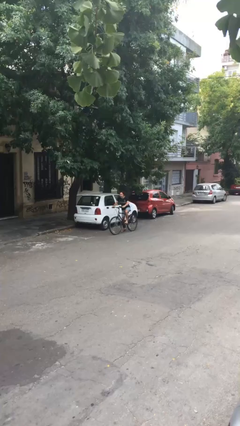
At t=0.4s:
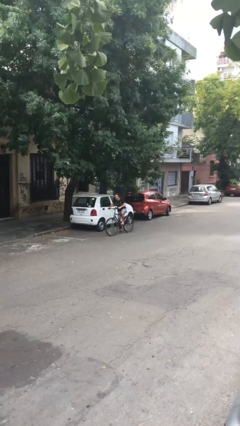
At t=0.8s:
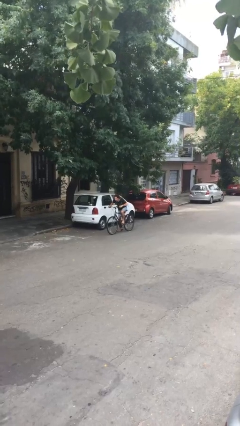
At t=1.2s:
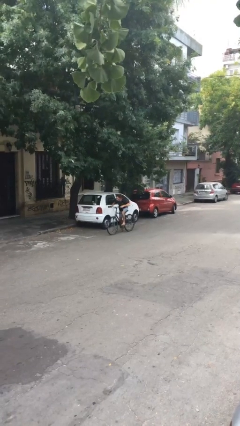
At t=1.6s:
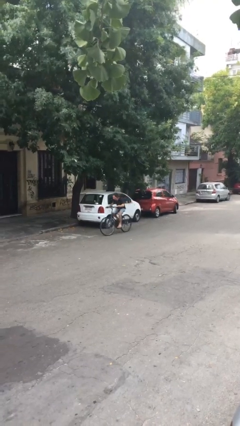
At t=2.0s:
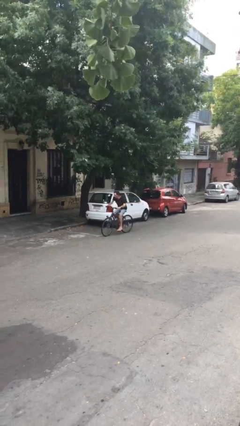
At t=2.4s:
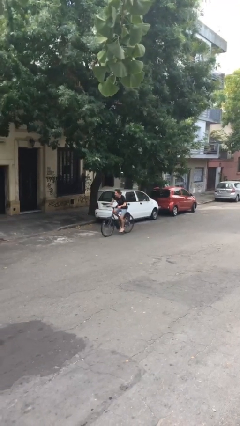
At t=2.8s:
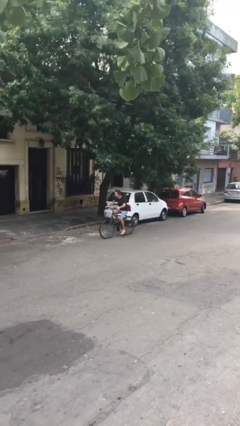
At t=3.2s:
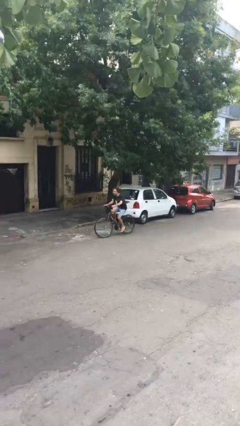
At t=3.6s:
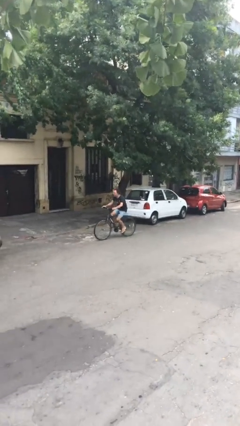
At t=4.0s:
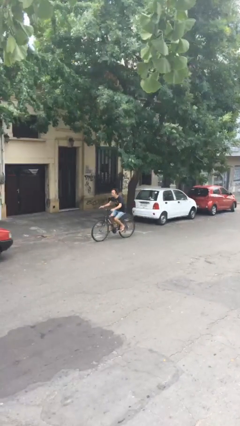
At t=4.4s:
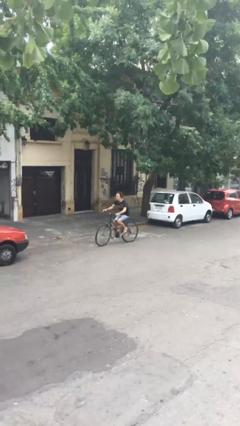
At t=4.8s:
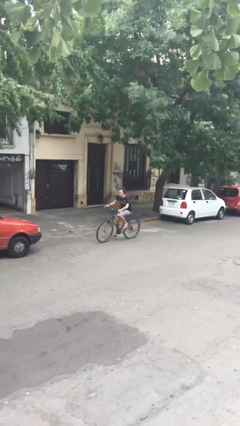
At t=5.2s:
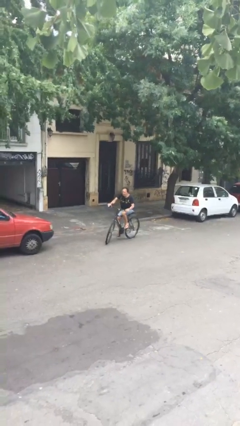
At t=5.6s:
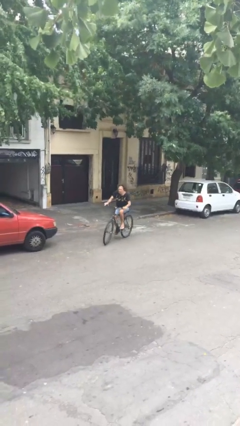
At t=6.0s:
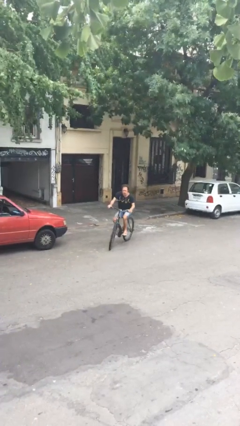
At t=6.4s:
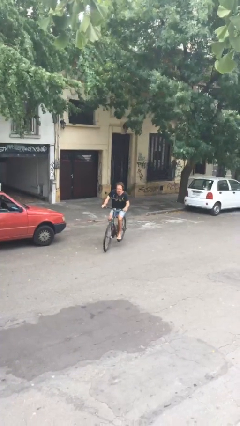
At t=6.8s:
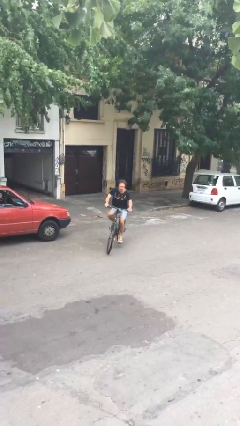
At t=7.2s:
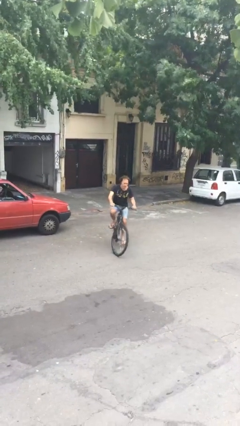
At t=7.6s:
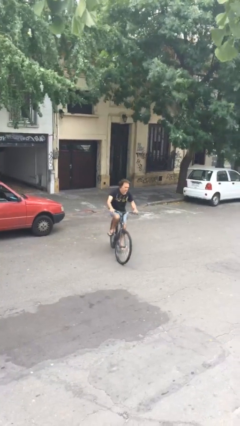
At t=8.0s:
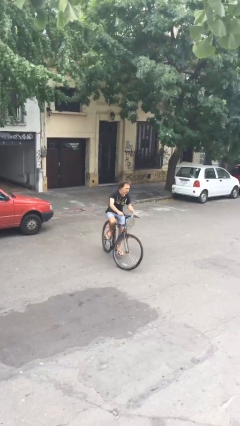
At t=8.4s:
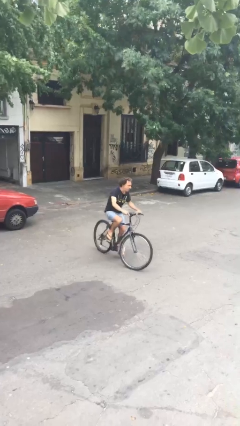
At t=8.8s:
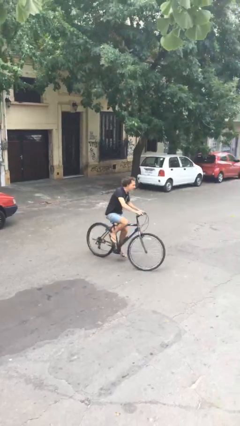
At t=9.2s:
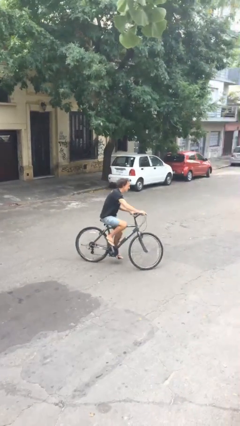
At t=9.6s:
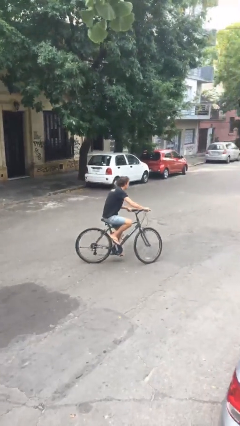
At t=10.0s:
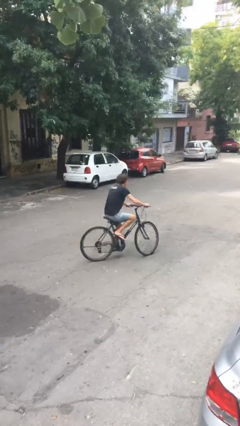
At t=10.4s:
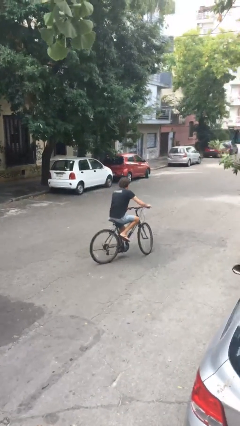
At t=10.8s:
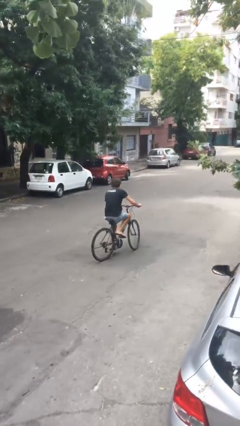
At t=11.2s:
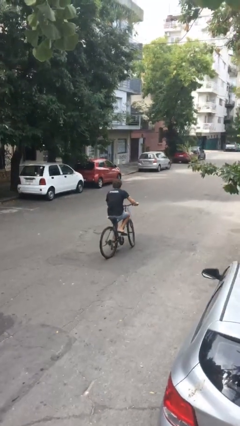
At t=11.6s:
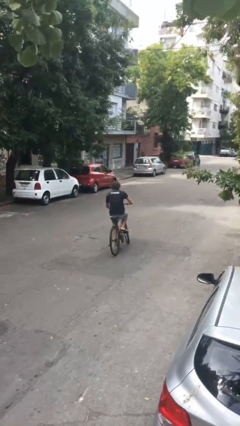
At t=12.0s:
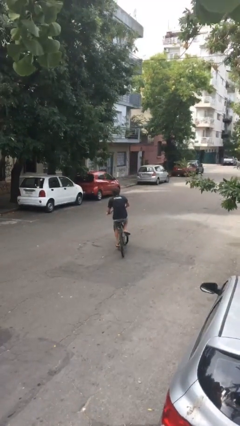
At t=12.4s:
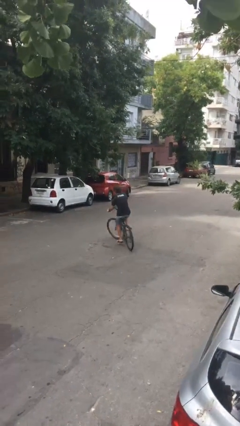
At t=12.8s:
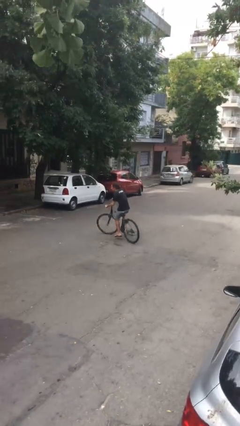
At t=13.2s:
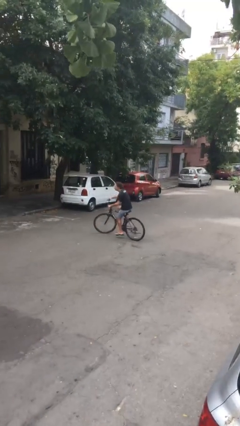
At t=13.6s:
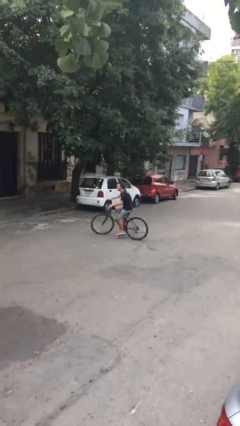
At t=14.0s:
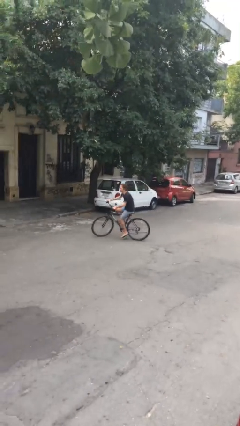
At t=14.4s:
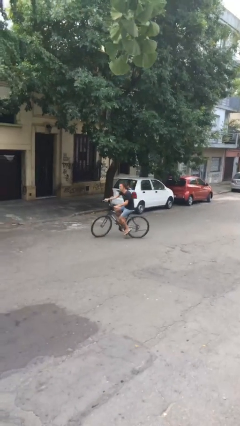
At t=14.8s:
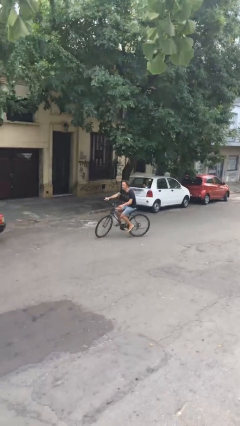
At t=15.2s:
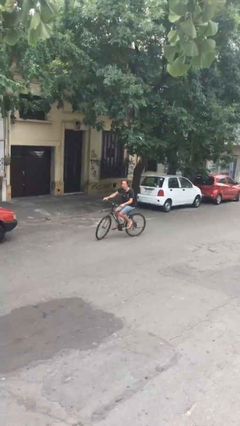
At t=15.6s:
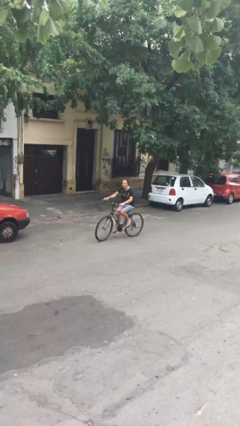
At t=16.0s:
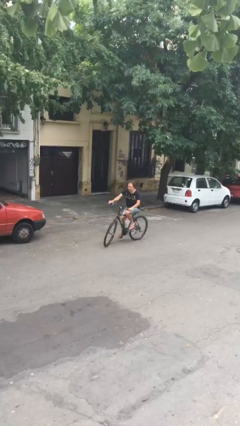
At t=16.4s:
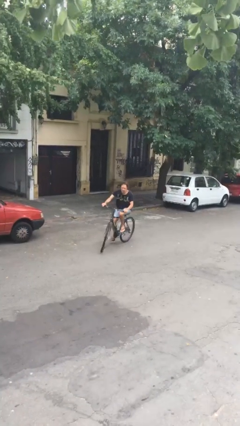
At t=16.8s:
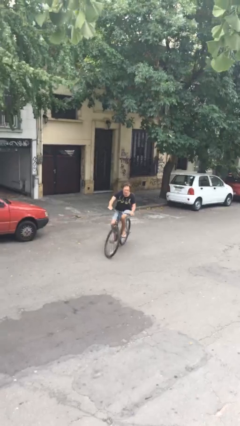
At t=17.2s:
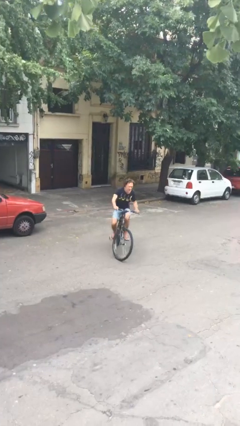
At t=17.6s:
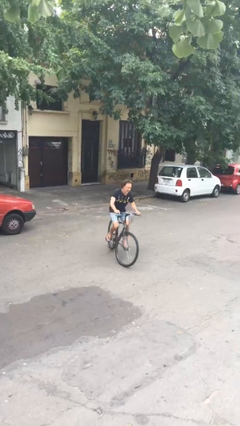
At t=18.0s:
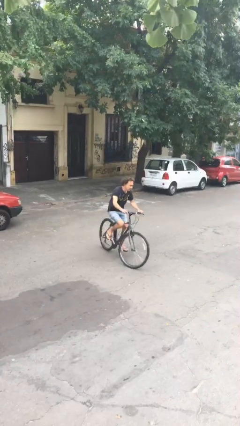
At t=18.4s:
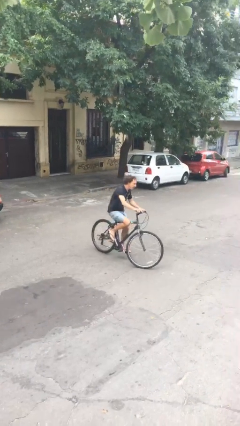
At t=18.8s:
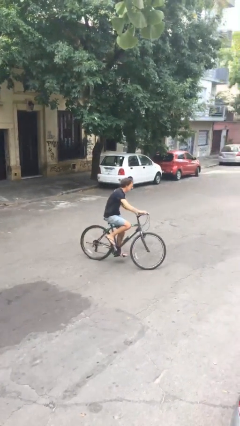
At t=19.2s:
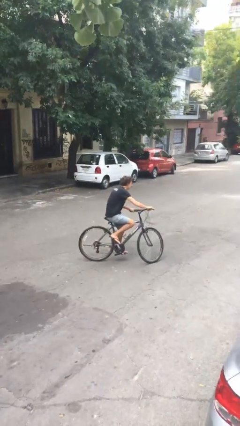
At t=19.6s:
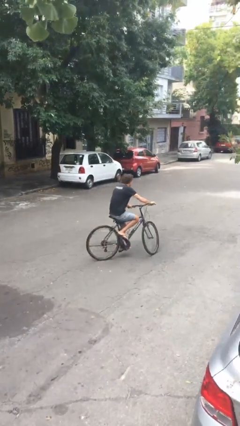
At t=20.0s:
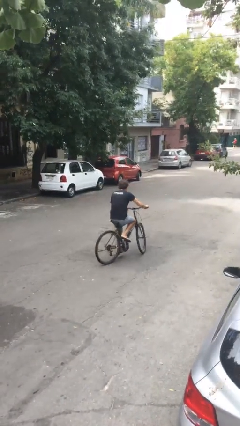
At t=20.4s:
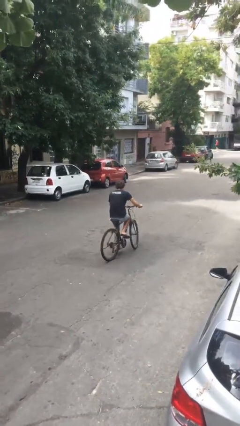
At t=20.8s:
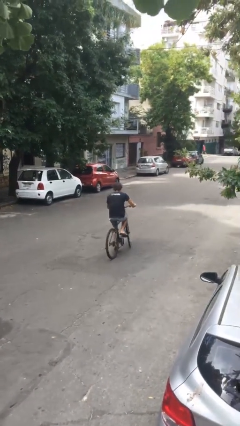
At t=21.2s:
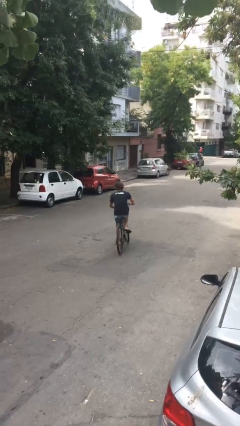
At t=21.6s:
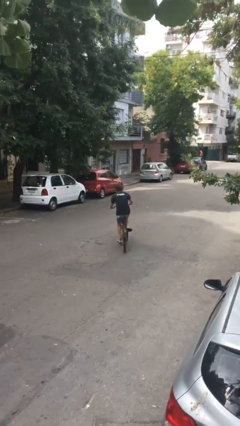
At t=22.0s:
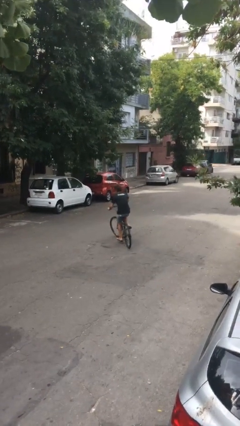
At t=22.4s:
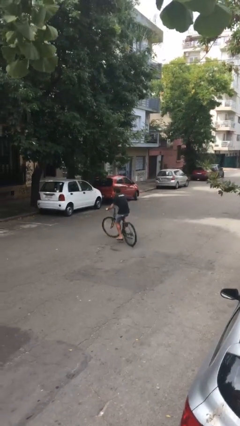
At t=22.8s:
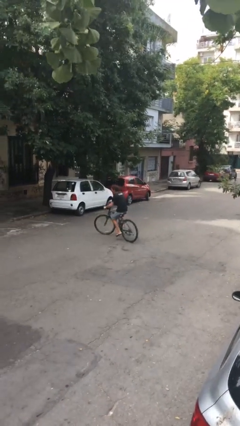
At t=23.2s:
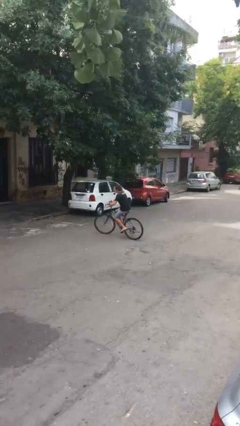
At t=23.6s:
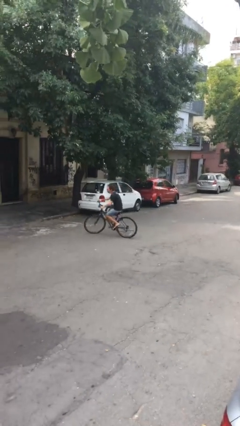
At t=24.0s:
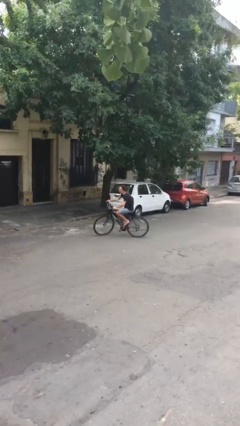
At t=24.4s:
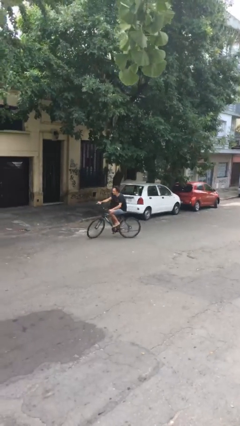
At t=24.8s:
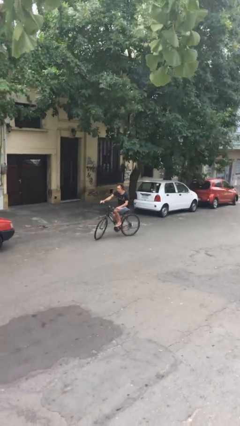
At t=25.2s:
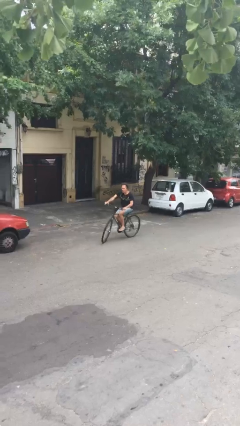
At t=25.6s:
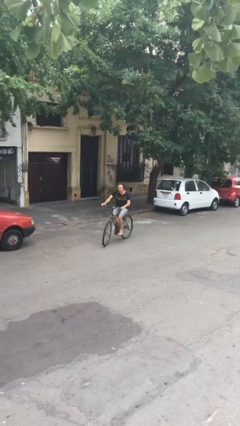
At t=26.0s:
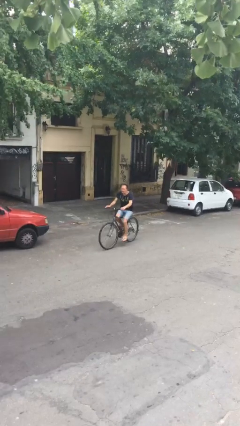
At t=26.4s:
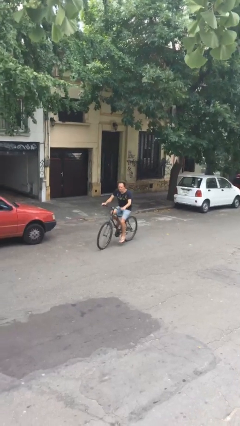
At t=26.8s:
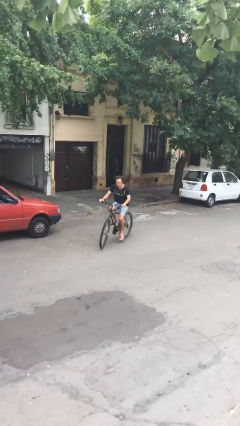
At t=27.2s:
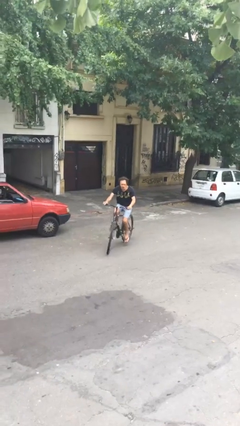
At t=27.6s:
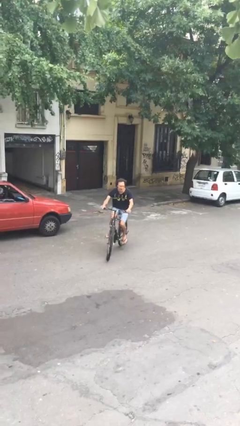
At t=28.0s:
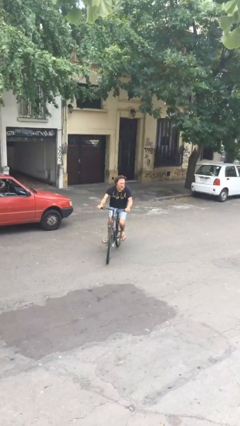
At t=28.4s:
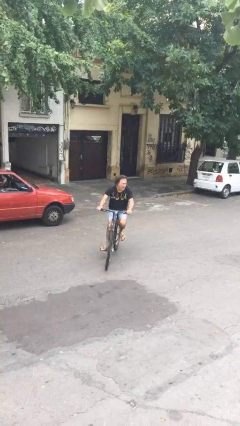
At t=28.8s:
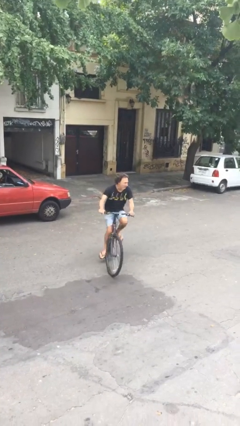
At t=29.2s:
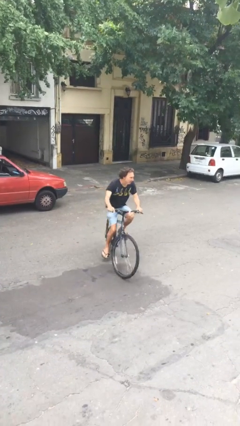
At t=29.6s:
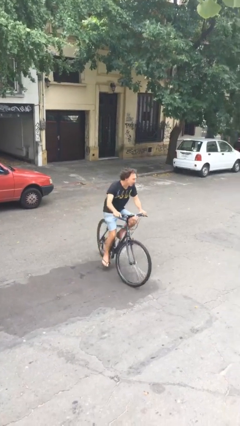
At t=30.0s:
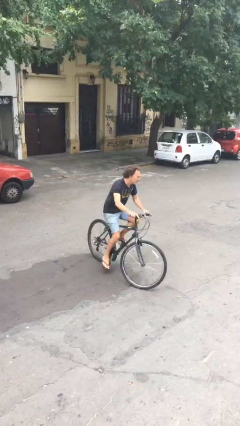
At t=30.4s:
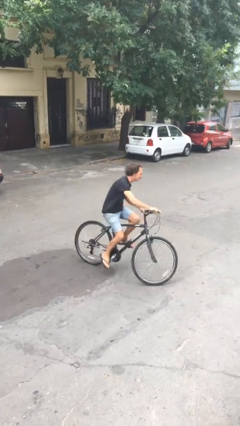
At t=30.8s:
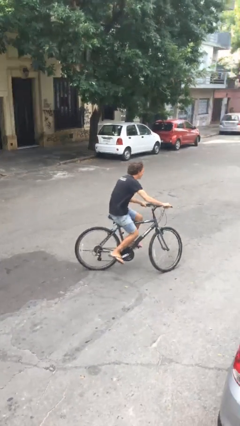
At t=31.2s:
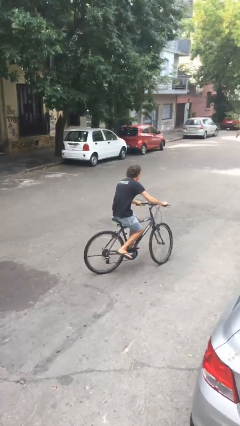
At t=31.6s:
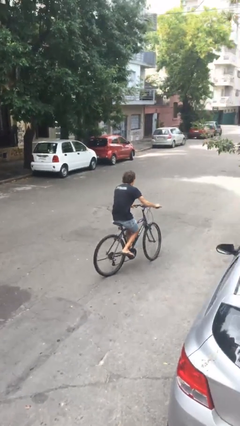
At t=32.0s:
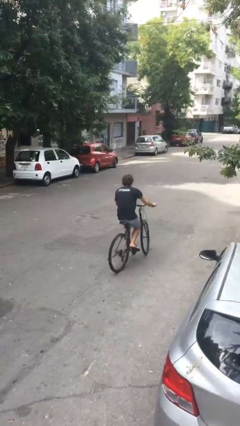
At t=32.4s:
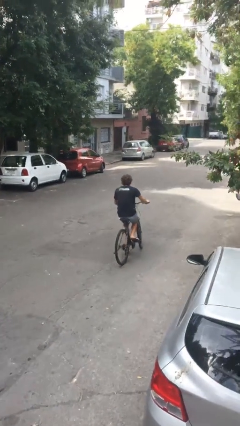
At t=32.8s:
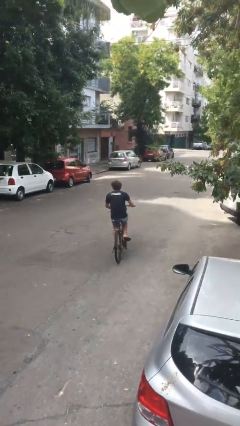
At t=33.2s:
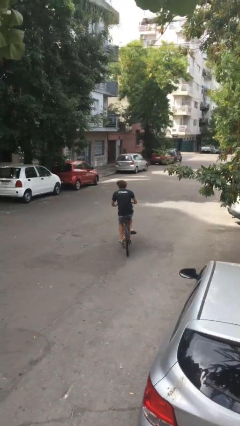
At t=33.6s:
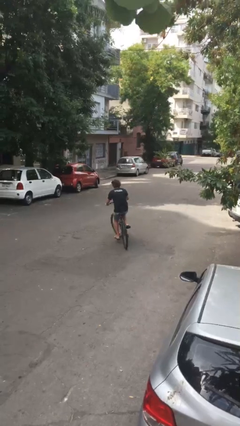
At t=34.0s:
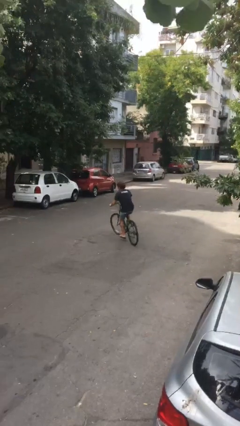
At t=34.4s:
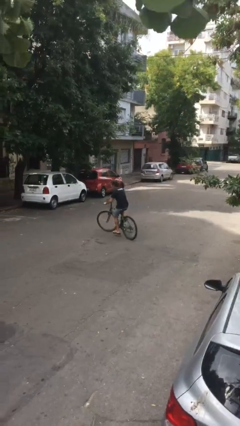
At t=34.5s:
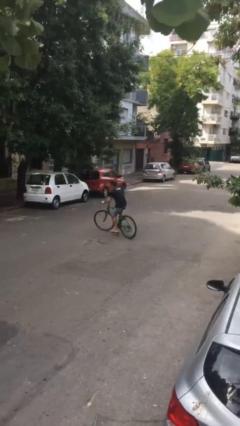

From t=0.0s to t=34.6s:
person rides bicycle

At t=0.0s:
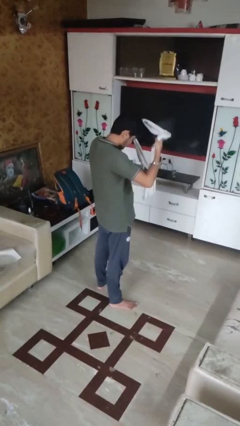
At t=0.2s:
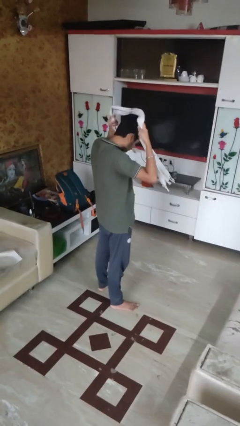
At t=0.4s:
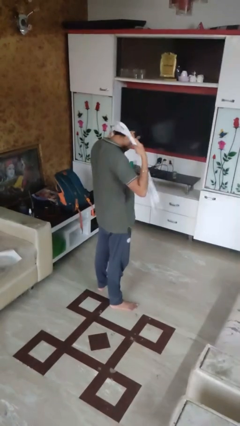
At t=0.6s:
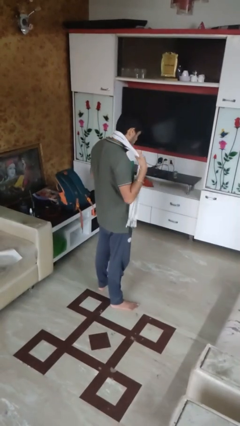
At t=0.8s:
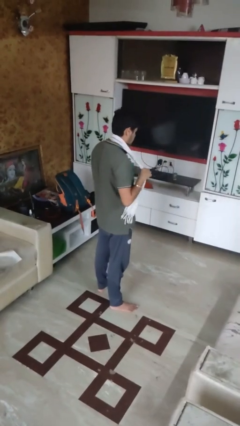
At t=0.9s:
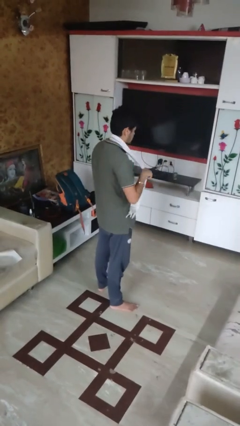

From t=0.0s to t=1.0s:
person puts on scarf
